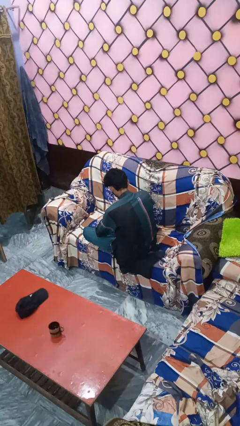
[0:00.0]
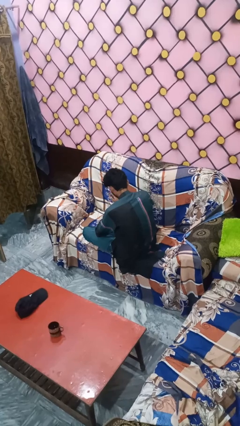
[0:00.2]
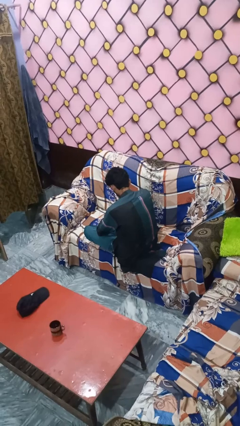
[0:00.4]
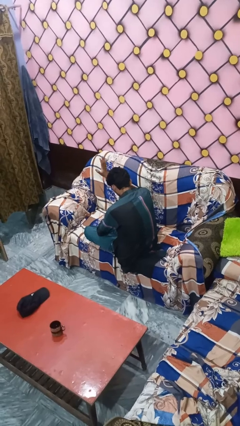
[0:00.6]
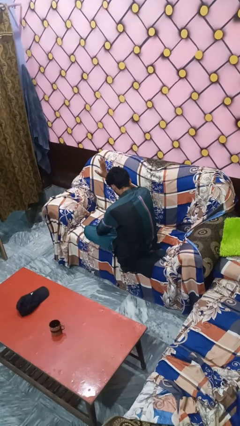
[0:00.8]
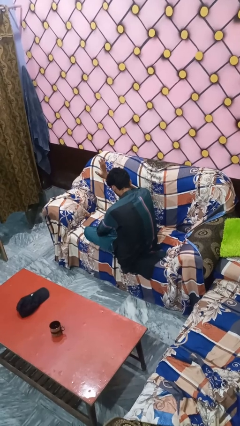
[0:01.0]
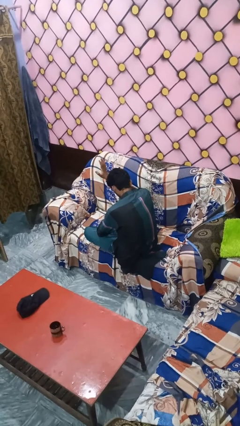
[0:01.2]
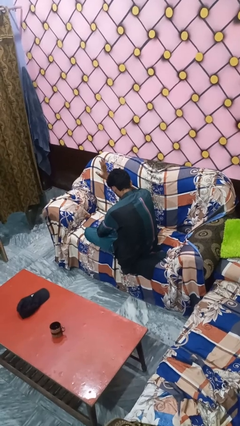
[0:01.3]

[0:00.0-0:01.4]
person gestures stop

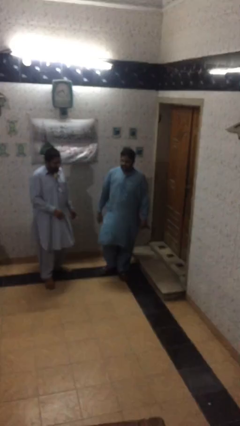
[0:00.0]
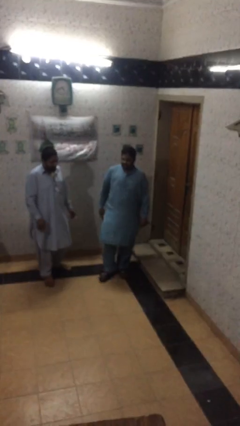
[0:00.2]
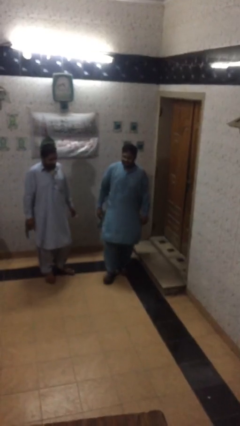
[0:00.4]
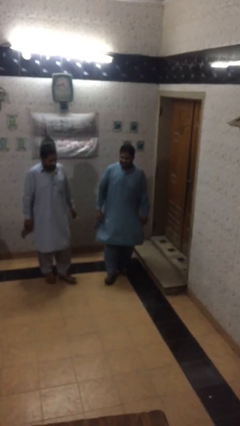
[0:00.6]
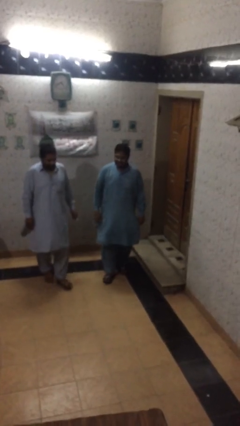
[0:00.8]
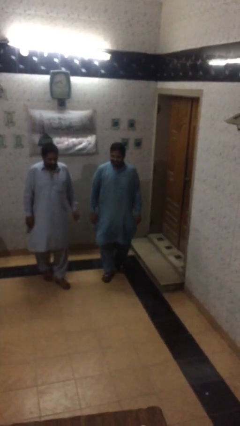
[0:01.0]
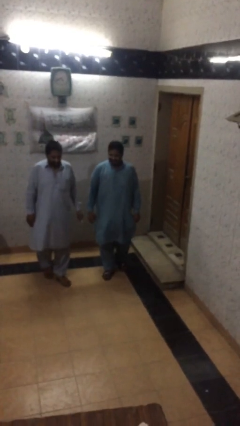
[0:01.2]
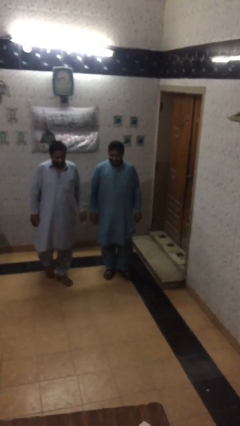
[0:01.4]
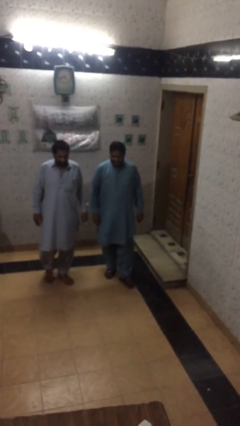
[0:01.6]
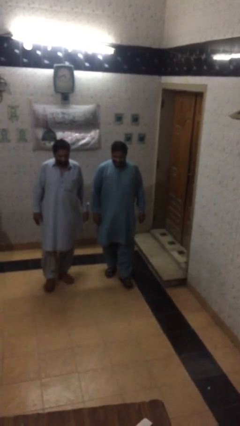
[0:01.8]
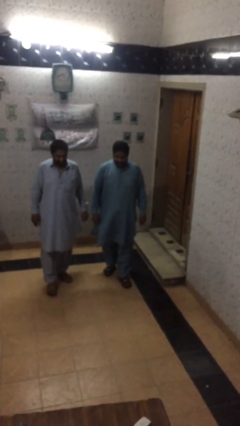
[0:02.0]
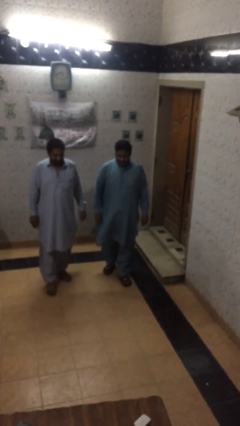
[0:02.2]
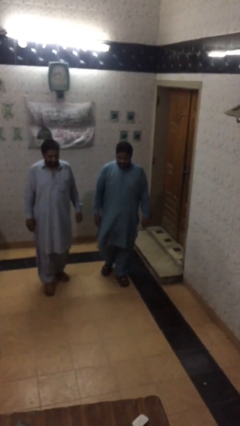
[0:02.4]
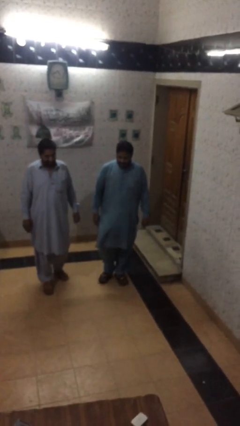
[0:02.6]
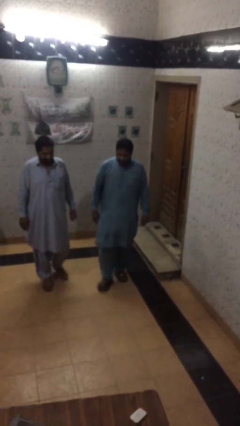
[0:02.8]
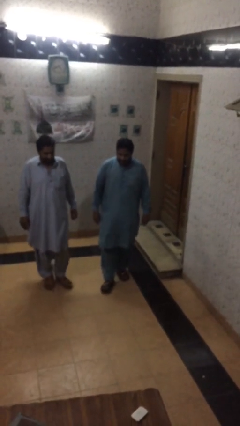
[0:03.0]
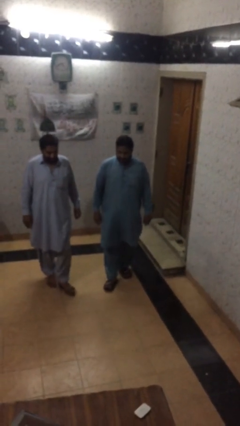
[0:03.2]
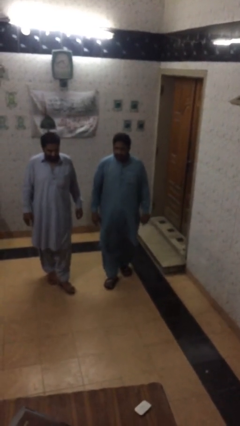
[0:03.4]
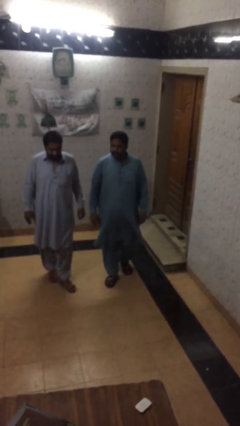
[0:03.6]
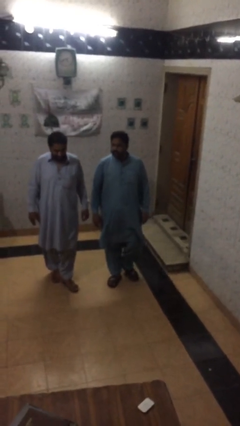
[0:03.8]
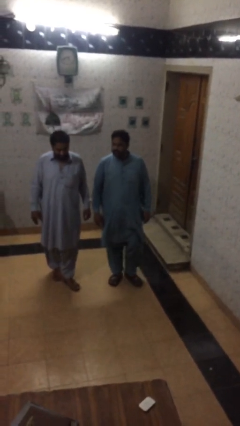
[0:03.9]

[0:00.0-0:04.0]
person talks to person

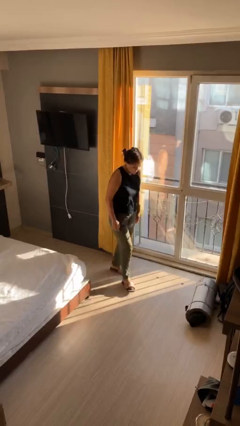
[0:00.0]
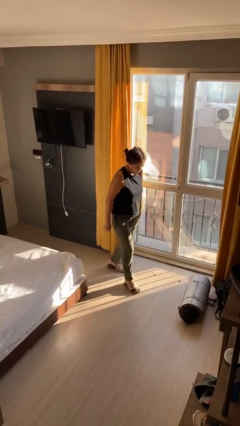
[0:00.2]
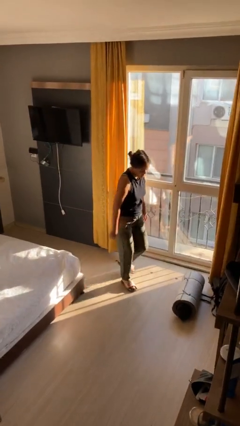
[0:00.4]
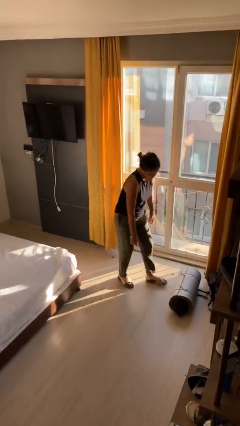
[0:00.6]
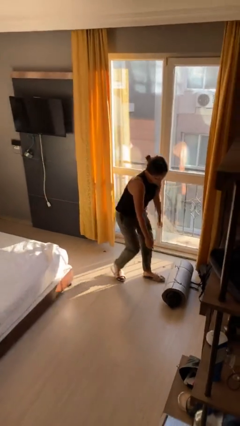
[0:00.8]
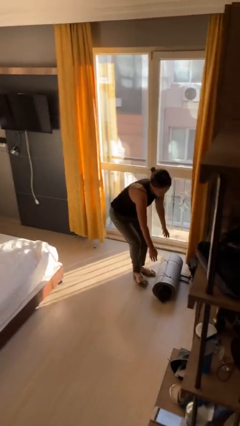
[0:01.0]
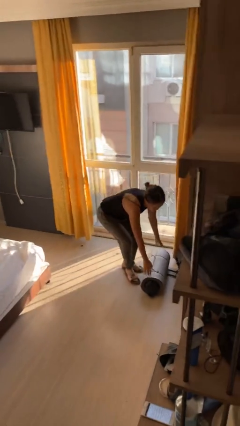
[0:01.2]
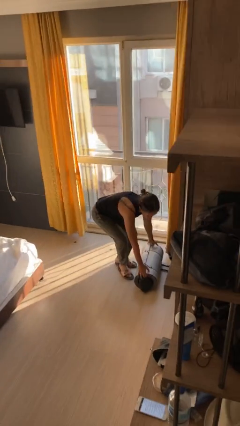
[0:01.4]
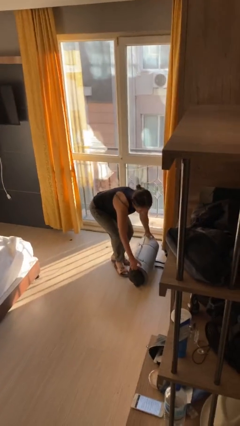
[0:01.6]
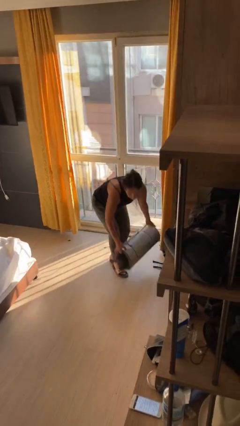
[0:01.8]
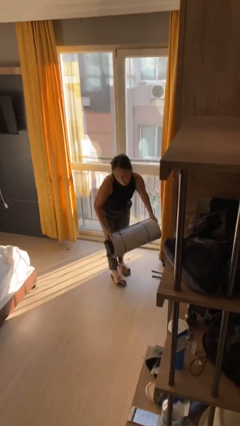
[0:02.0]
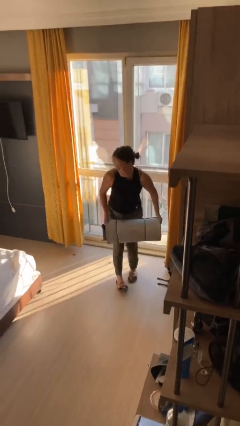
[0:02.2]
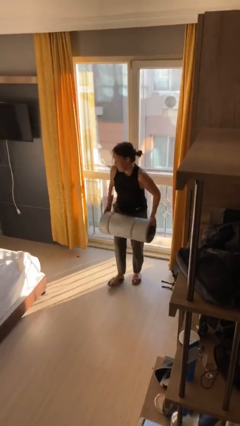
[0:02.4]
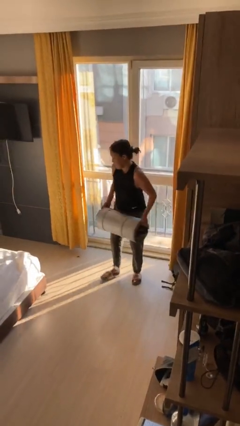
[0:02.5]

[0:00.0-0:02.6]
person picks up object from floor

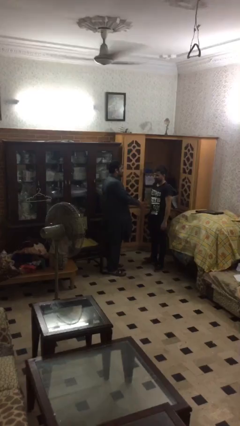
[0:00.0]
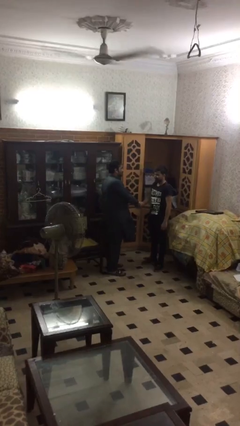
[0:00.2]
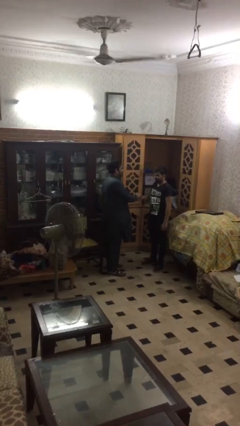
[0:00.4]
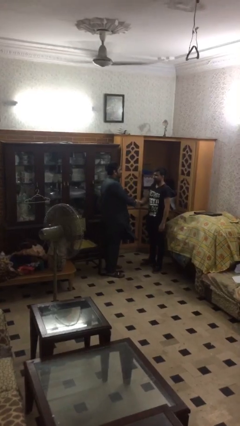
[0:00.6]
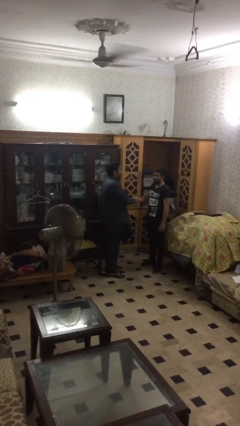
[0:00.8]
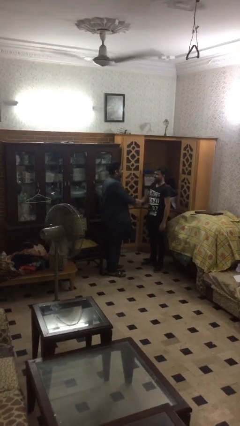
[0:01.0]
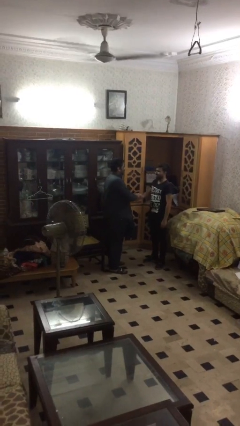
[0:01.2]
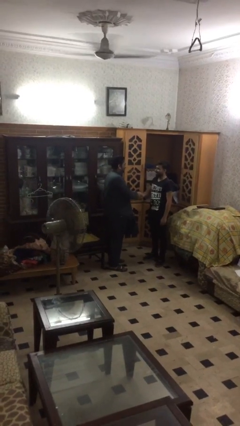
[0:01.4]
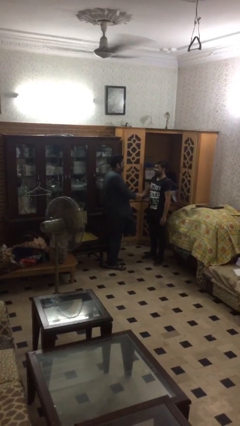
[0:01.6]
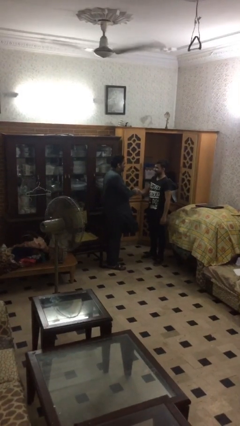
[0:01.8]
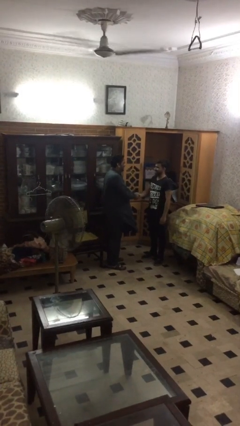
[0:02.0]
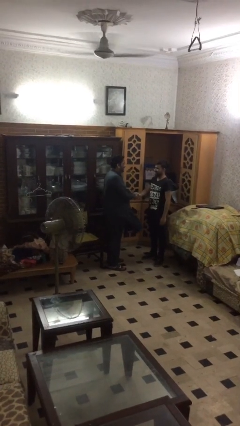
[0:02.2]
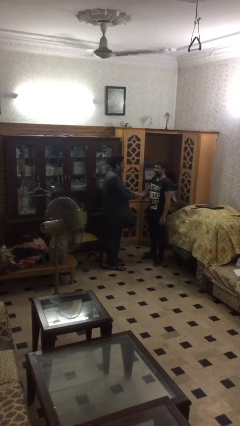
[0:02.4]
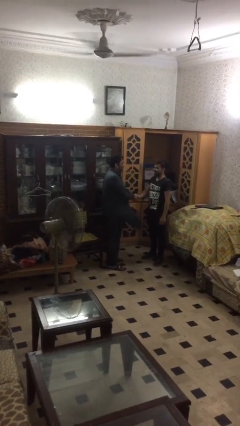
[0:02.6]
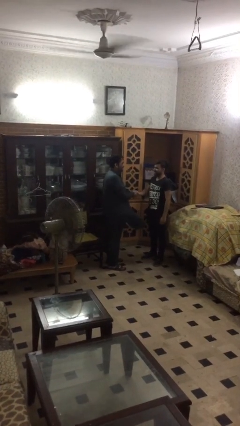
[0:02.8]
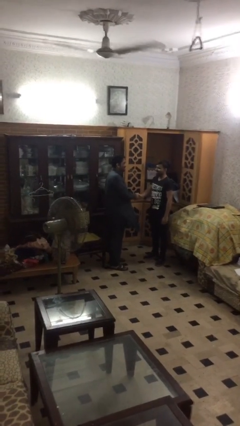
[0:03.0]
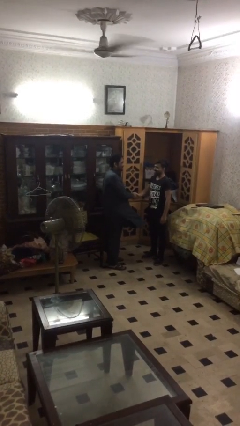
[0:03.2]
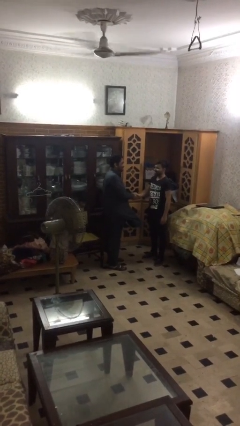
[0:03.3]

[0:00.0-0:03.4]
person shakes hand

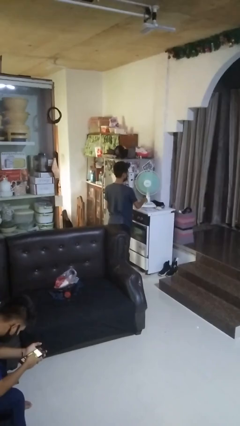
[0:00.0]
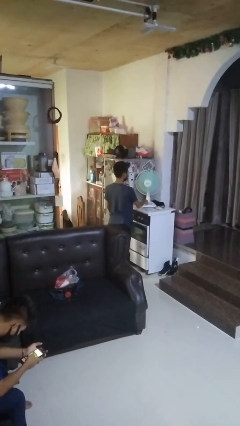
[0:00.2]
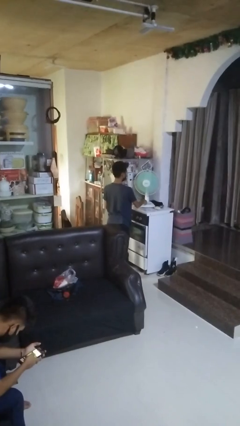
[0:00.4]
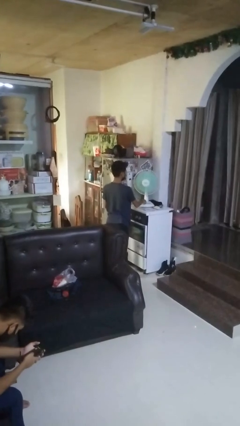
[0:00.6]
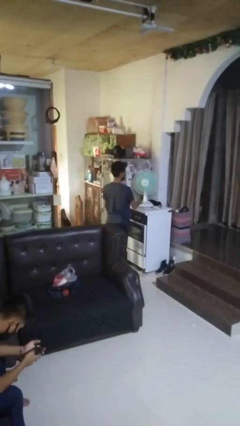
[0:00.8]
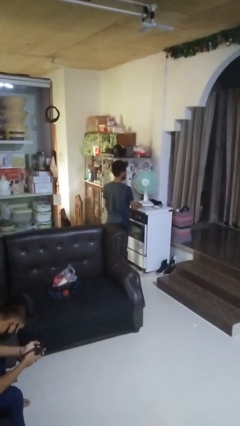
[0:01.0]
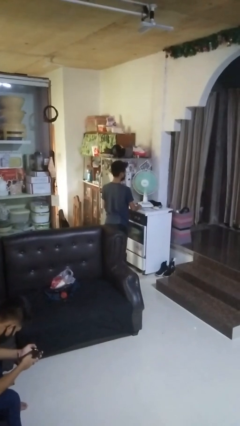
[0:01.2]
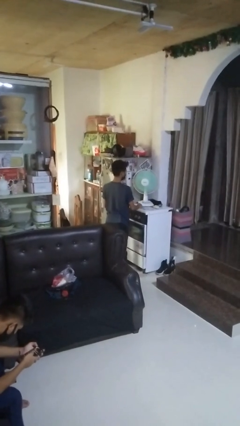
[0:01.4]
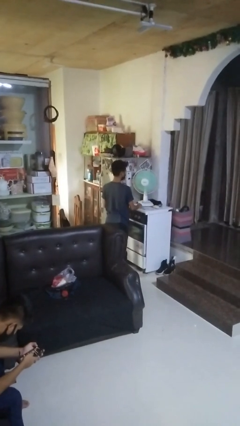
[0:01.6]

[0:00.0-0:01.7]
person turns off fan

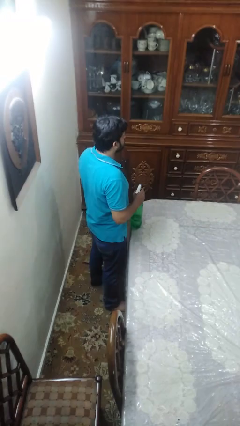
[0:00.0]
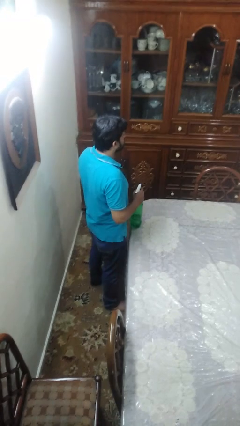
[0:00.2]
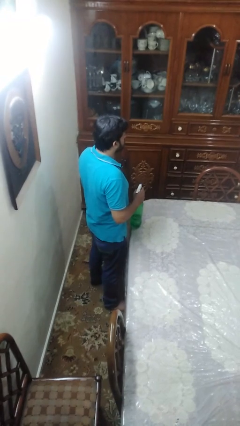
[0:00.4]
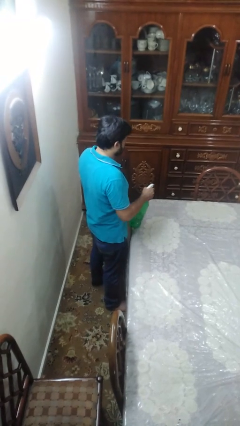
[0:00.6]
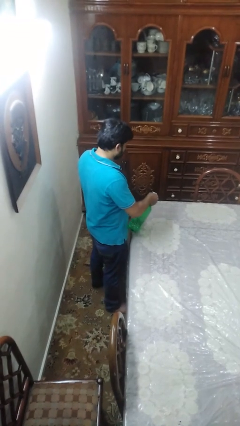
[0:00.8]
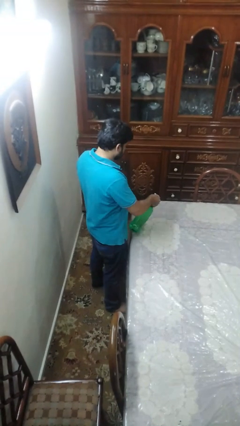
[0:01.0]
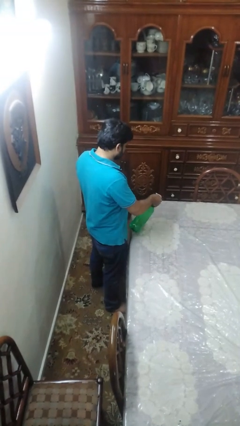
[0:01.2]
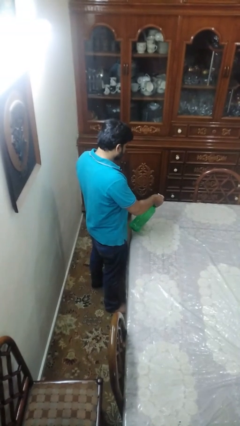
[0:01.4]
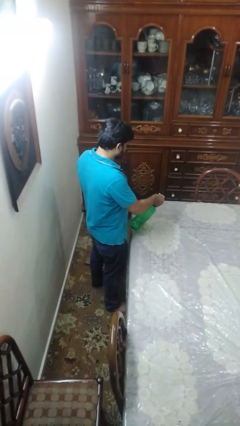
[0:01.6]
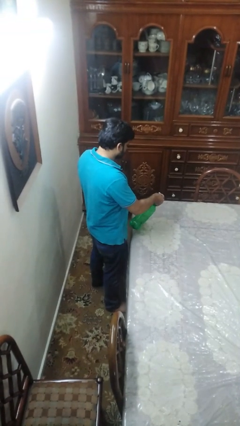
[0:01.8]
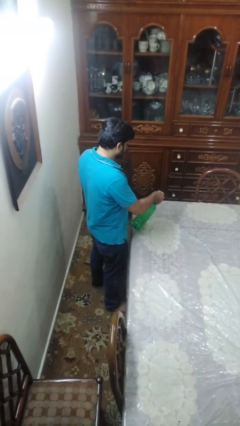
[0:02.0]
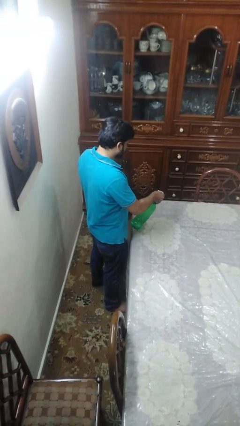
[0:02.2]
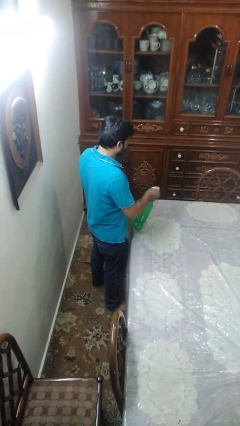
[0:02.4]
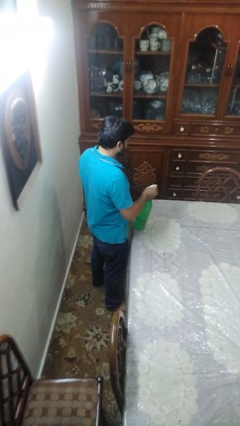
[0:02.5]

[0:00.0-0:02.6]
person sprays from bottle

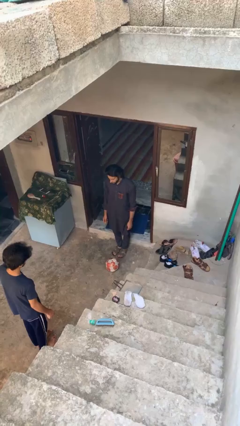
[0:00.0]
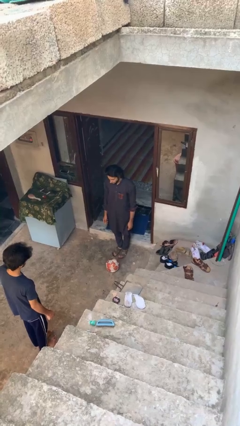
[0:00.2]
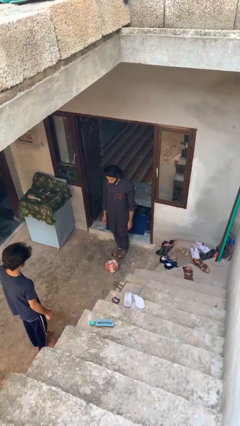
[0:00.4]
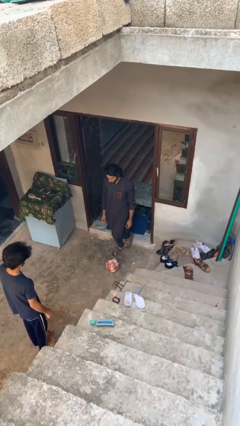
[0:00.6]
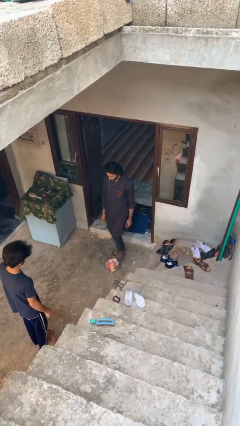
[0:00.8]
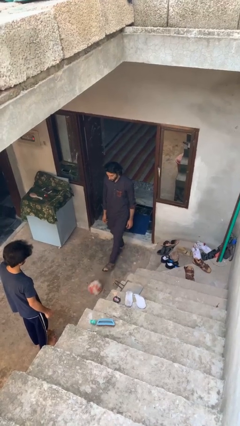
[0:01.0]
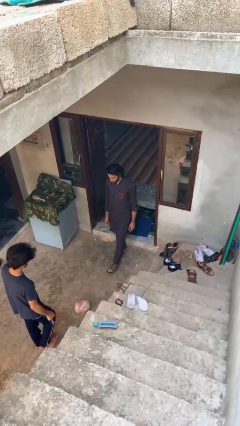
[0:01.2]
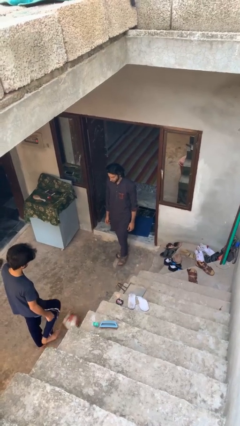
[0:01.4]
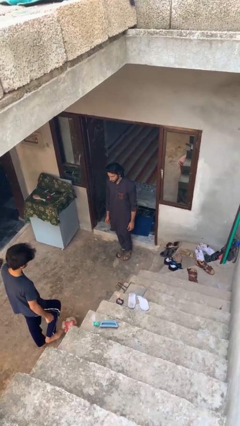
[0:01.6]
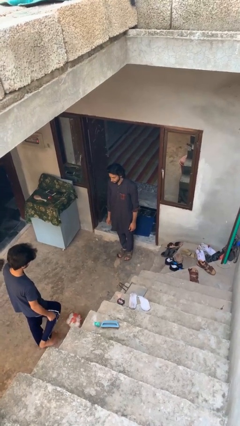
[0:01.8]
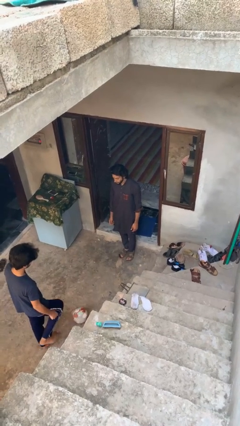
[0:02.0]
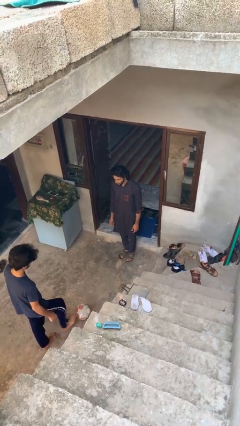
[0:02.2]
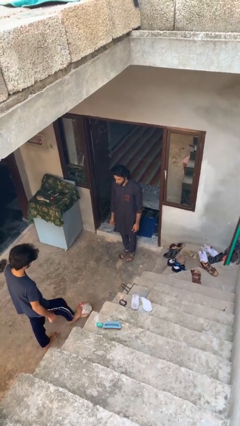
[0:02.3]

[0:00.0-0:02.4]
person kicks object to person
